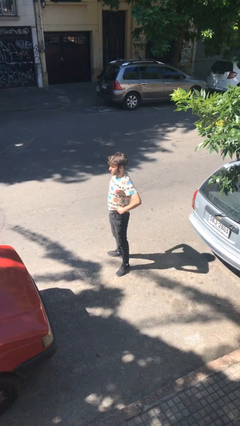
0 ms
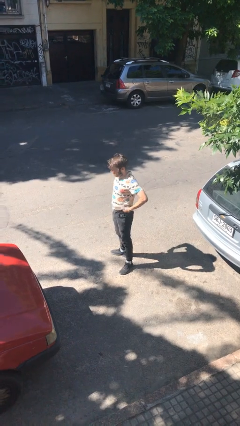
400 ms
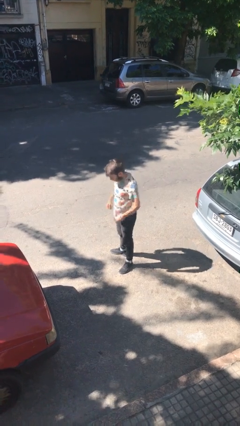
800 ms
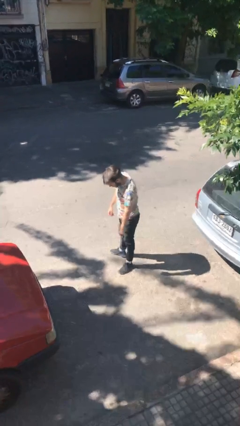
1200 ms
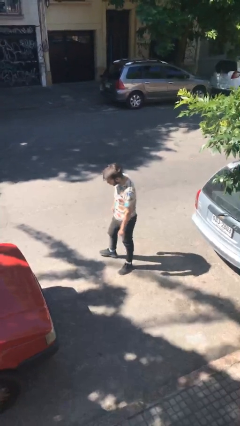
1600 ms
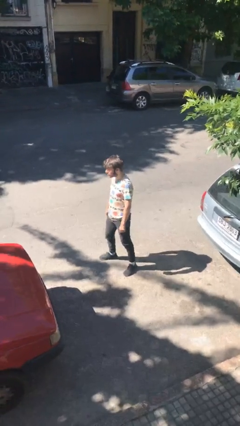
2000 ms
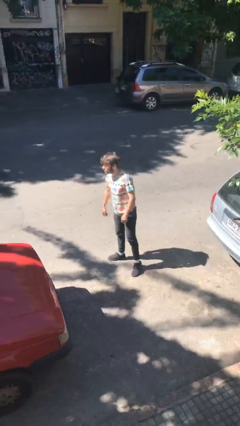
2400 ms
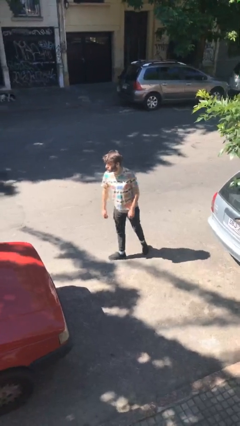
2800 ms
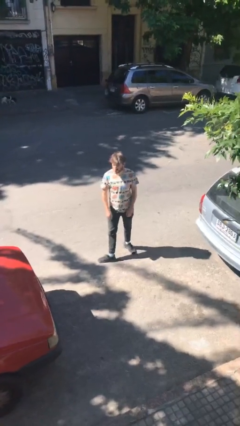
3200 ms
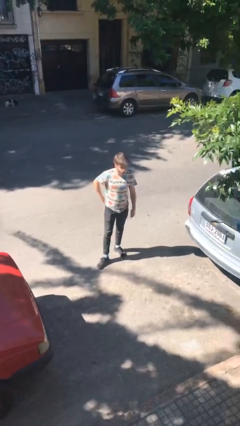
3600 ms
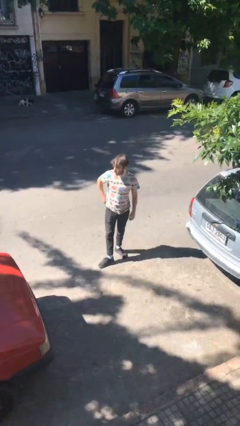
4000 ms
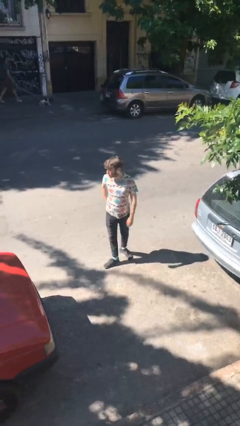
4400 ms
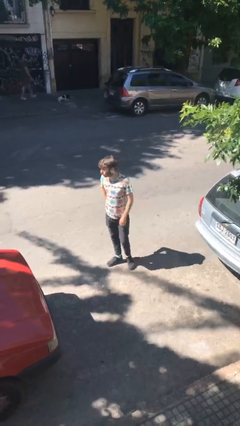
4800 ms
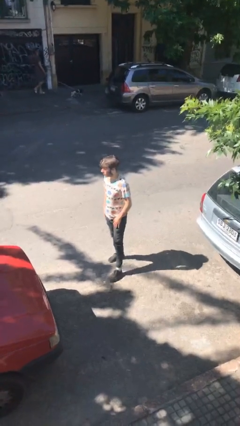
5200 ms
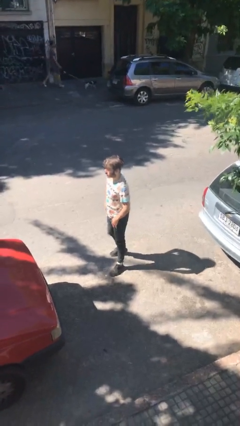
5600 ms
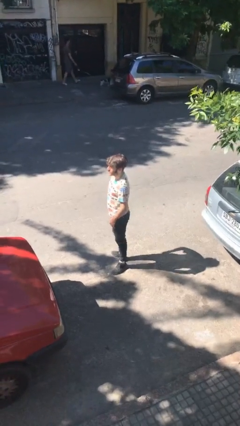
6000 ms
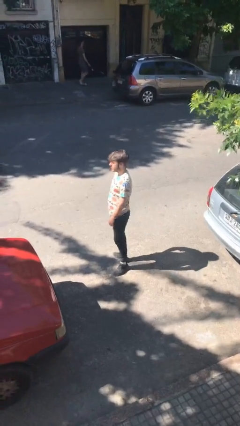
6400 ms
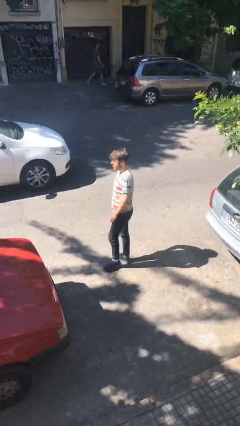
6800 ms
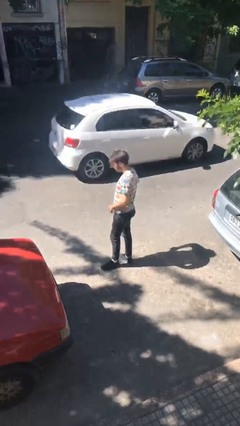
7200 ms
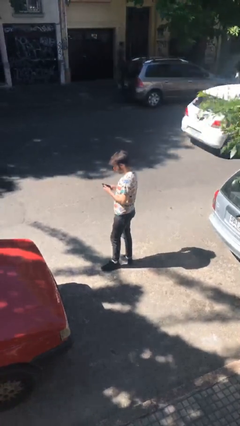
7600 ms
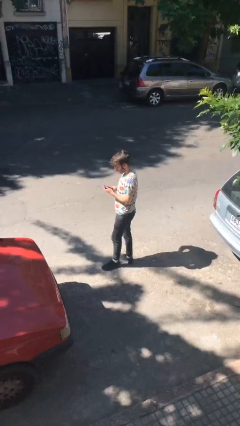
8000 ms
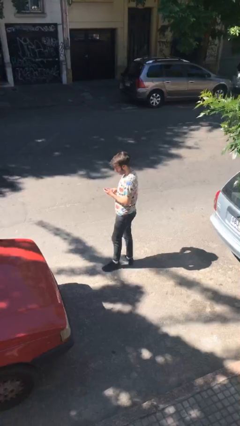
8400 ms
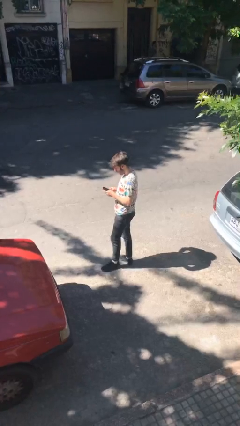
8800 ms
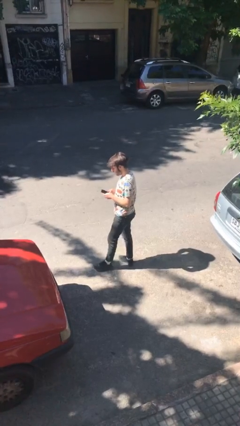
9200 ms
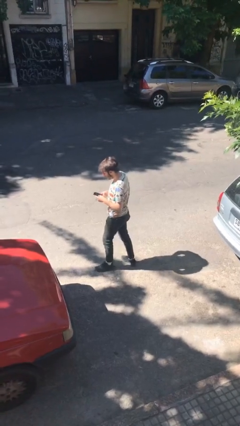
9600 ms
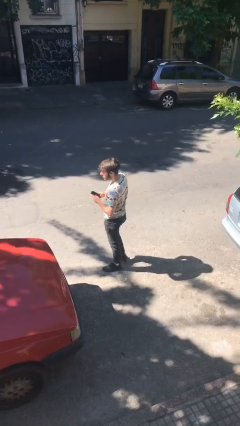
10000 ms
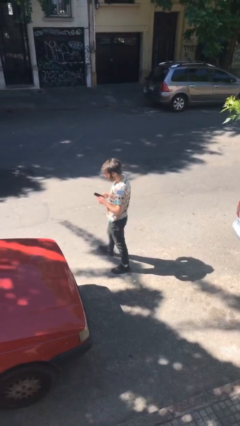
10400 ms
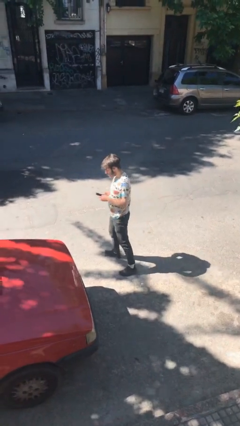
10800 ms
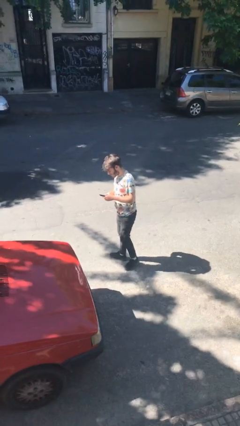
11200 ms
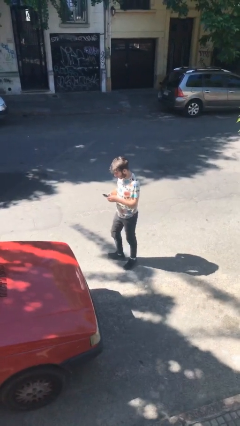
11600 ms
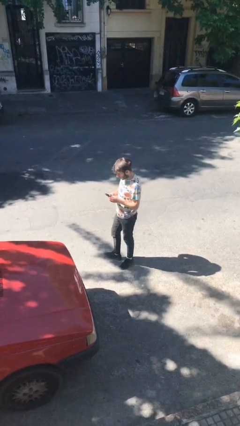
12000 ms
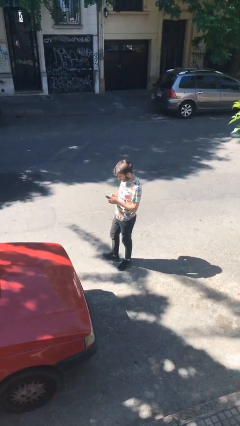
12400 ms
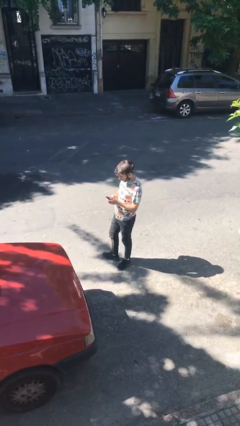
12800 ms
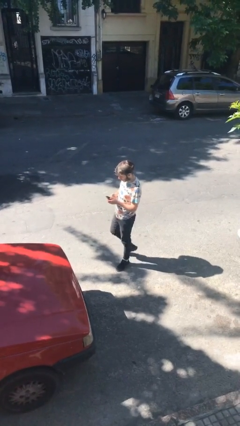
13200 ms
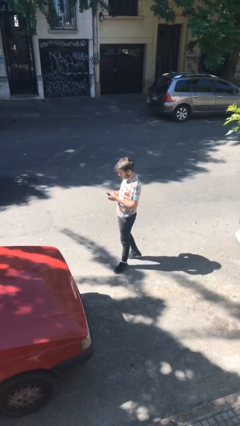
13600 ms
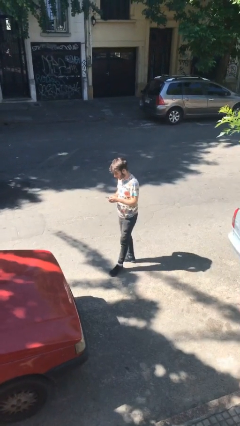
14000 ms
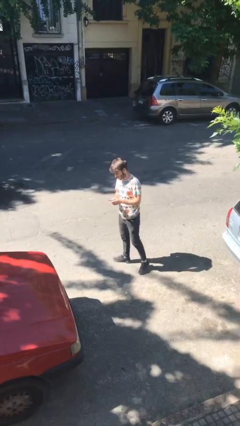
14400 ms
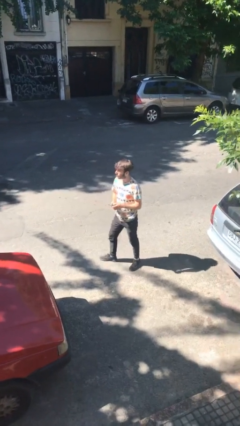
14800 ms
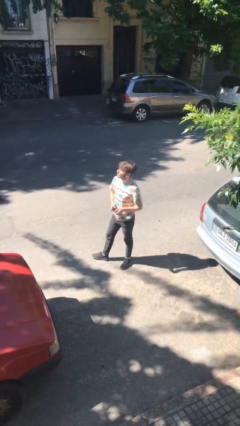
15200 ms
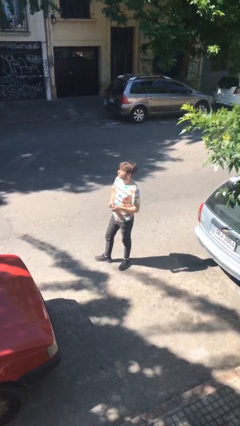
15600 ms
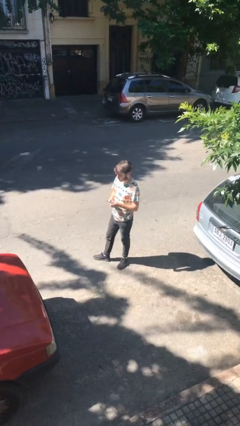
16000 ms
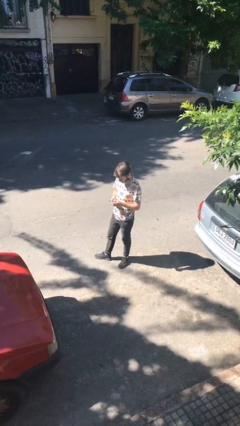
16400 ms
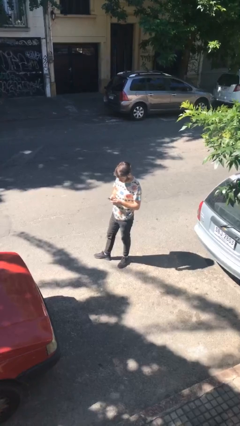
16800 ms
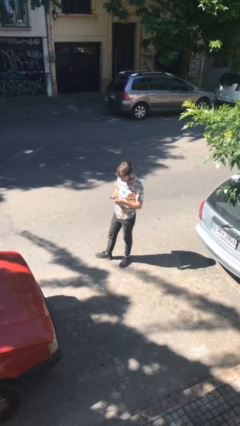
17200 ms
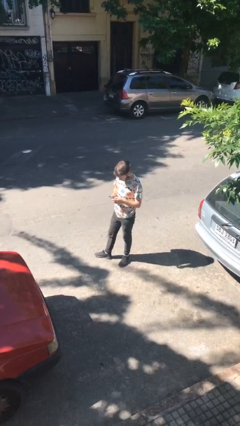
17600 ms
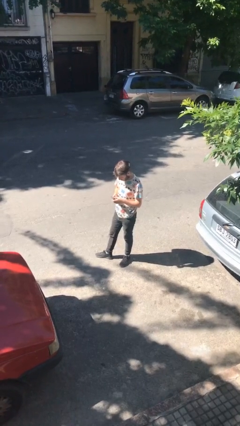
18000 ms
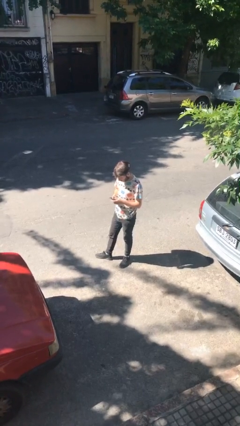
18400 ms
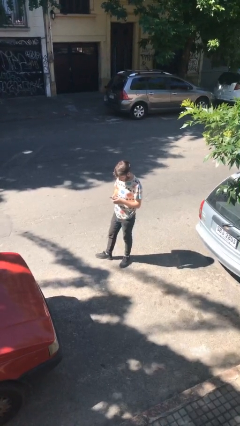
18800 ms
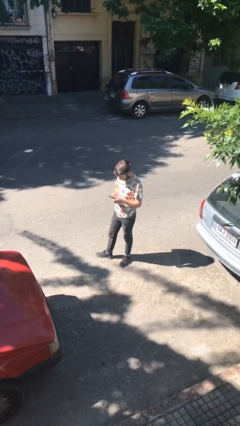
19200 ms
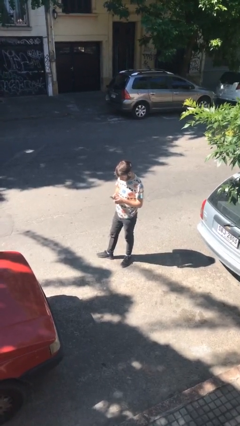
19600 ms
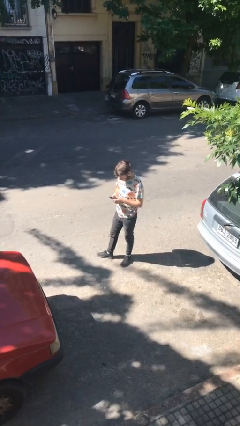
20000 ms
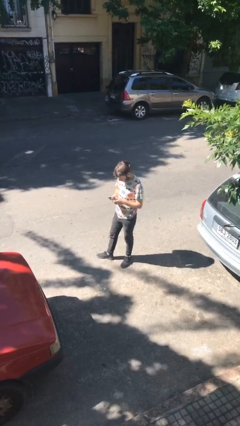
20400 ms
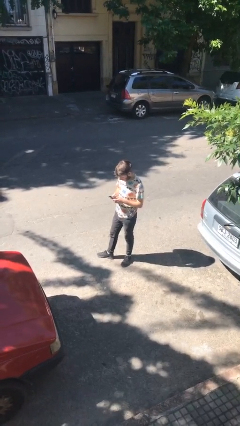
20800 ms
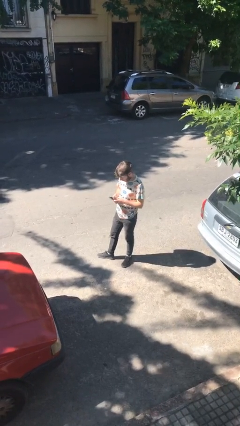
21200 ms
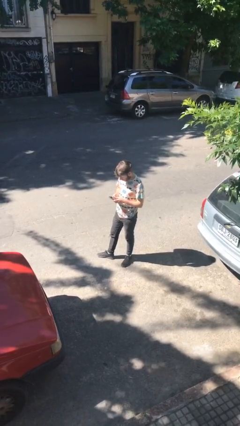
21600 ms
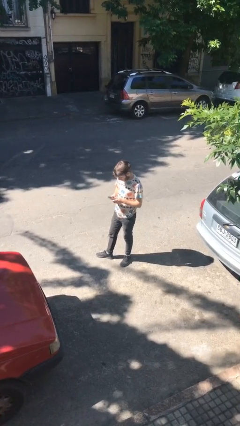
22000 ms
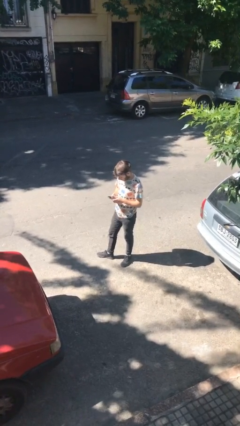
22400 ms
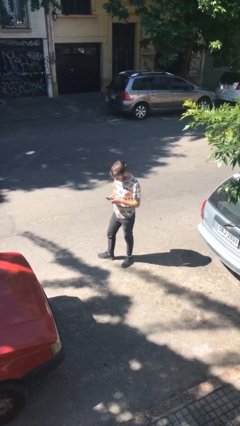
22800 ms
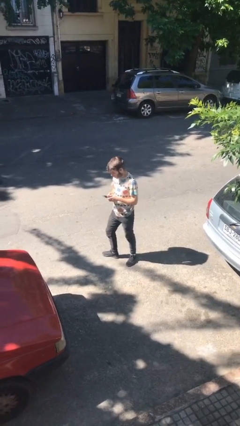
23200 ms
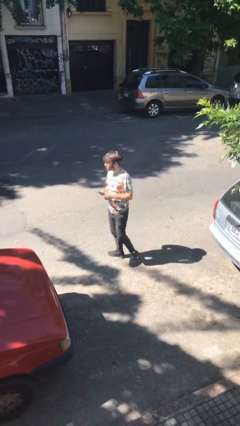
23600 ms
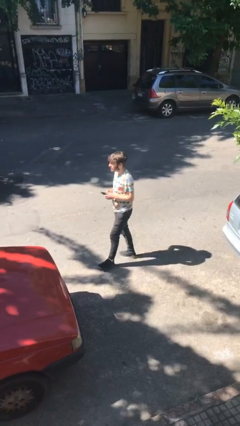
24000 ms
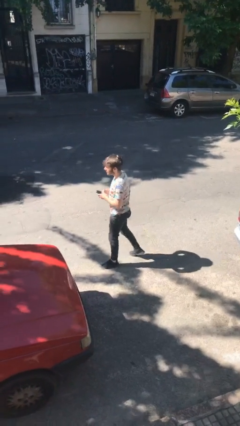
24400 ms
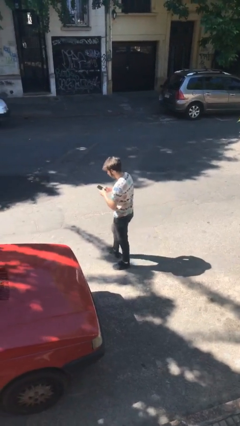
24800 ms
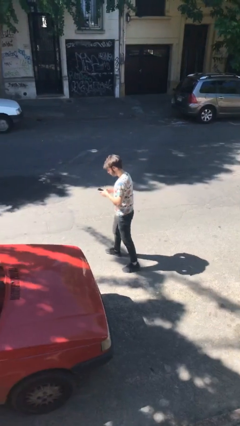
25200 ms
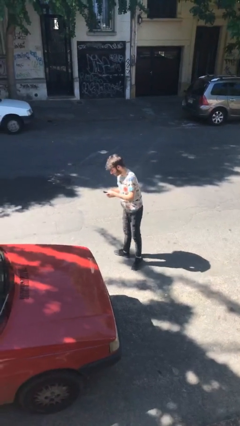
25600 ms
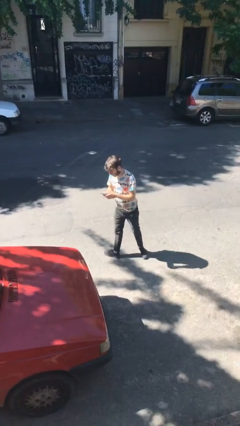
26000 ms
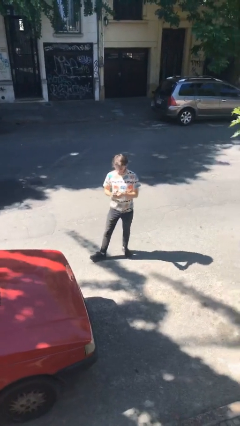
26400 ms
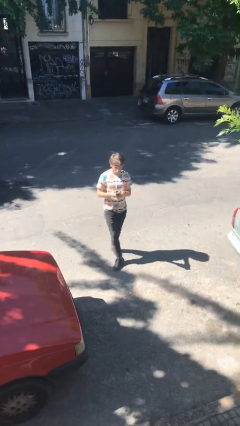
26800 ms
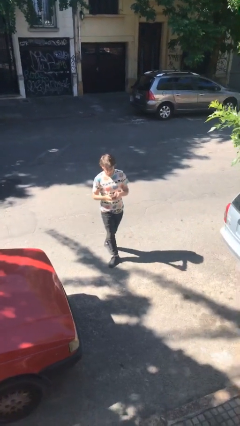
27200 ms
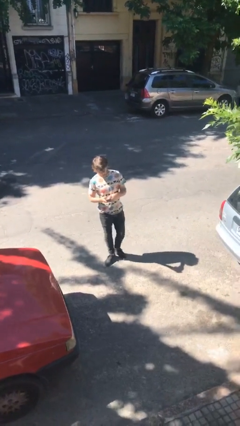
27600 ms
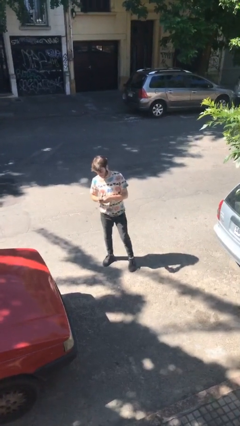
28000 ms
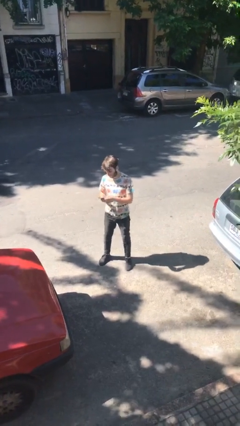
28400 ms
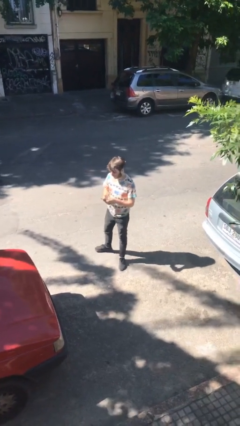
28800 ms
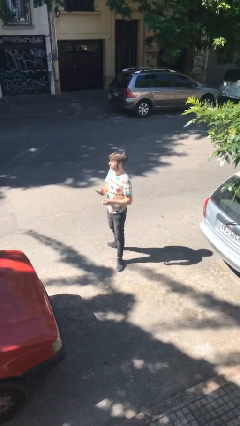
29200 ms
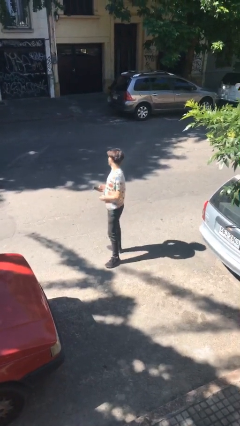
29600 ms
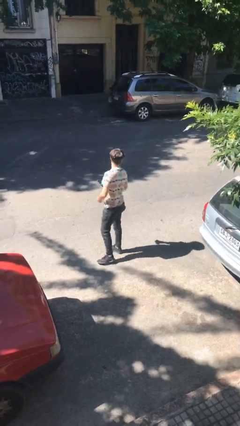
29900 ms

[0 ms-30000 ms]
person walks

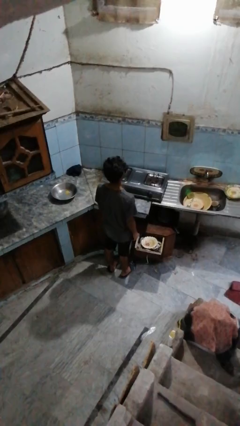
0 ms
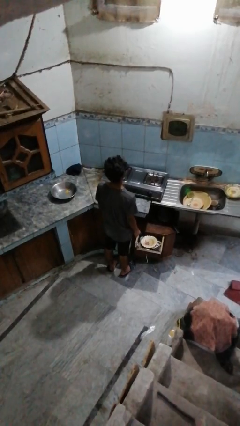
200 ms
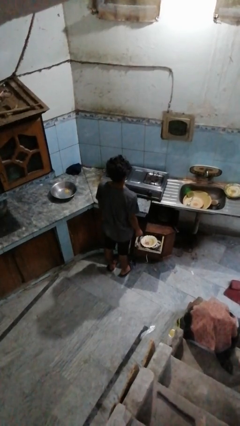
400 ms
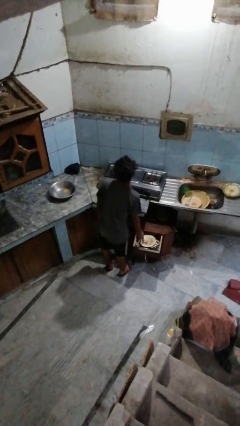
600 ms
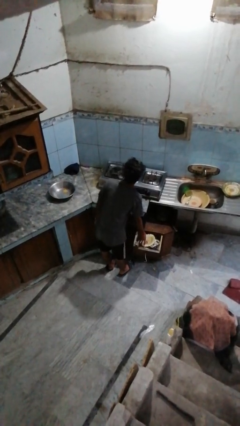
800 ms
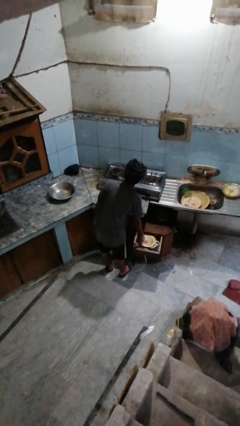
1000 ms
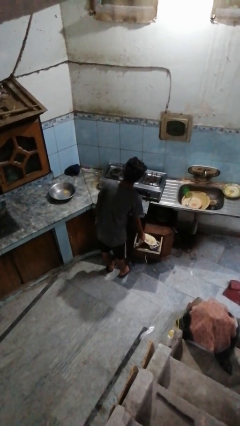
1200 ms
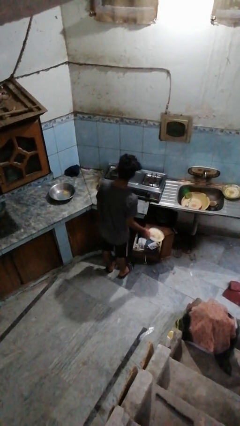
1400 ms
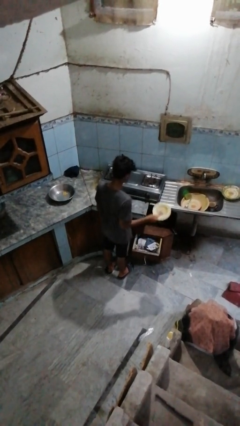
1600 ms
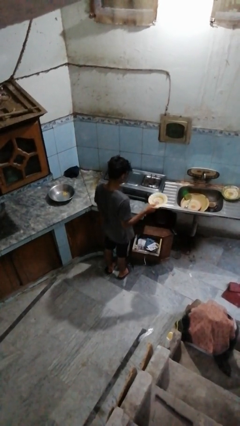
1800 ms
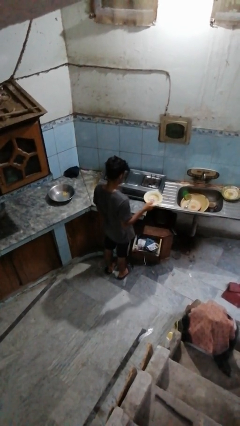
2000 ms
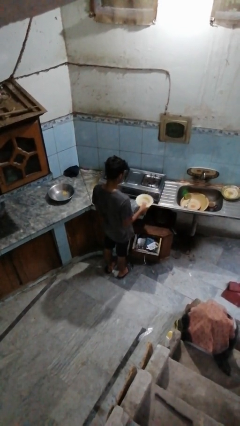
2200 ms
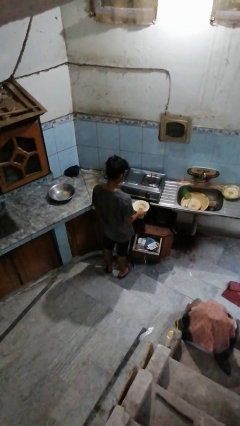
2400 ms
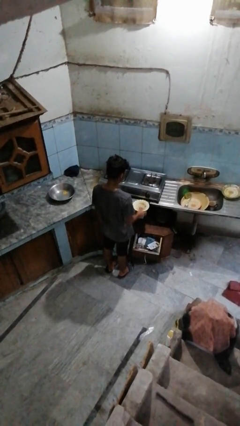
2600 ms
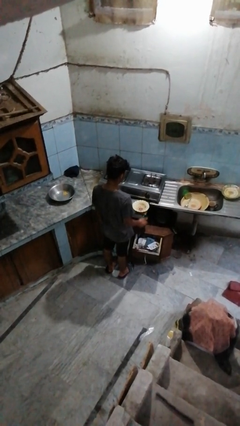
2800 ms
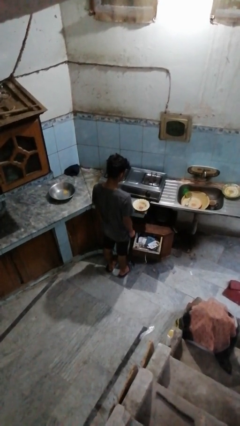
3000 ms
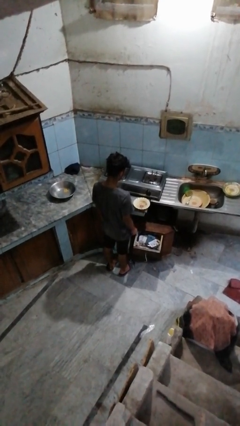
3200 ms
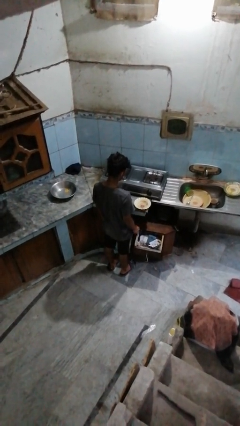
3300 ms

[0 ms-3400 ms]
person takes object from kitchen drawer

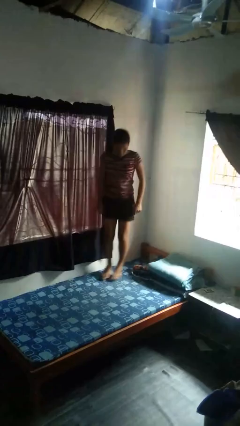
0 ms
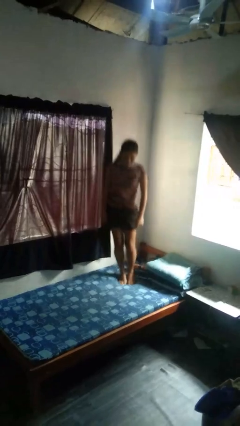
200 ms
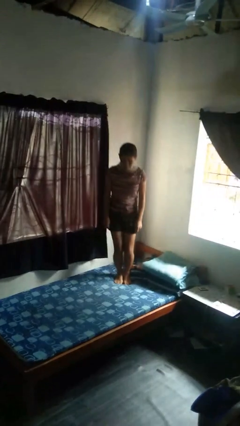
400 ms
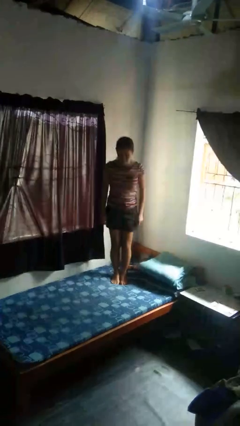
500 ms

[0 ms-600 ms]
person jumps on bed
